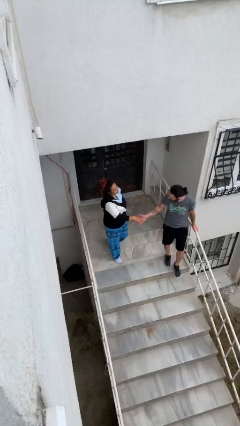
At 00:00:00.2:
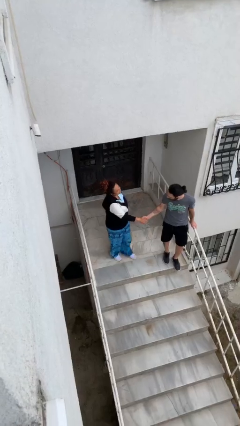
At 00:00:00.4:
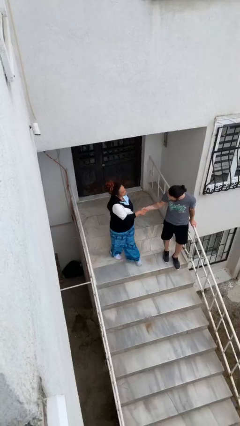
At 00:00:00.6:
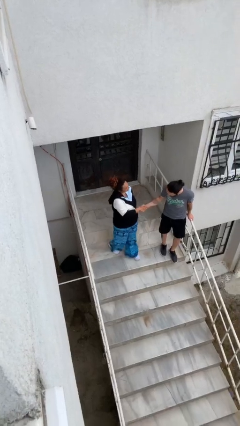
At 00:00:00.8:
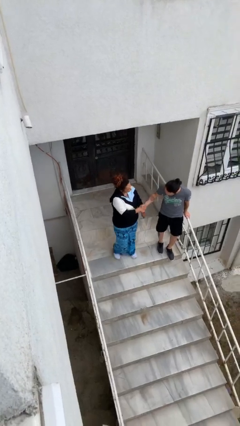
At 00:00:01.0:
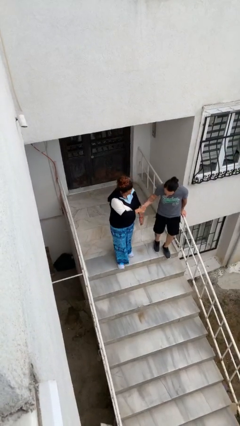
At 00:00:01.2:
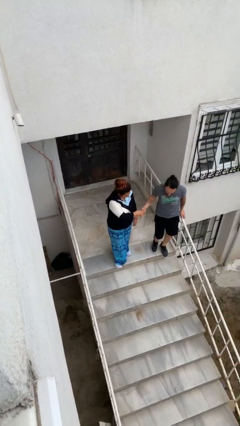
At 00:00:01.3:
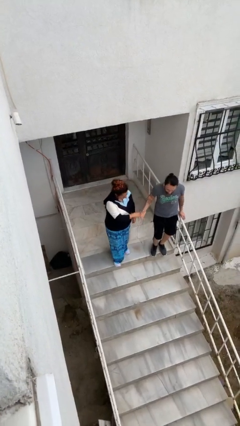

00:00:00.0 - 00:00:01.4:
person shakes hand

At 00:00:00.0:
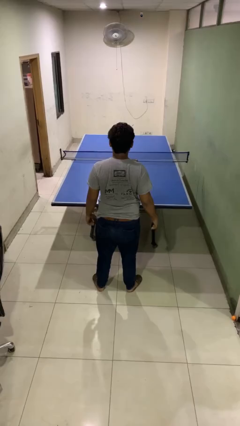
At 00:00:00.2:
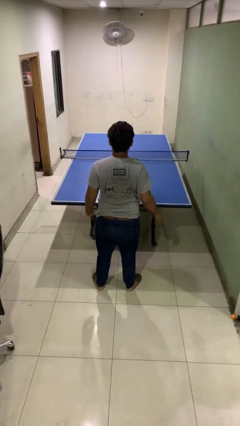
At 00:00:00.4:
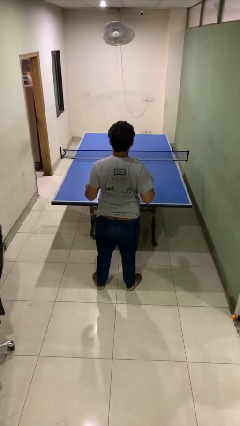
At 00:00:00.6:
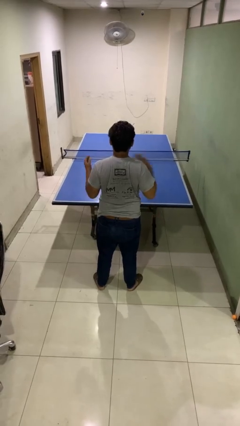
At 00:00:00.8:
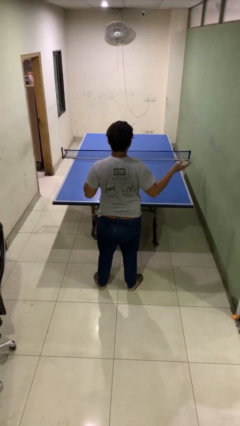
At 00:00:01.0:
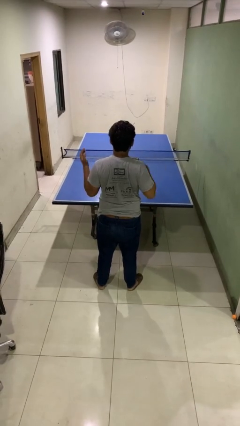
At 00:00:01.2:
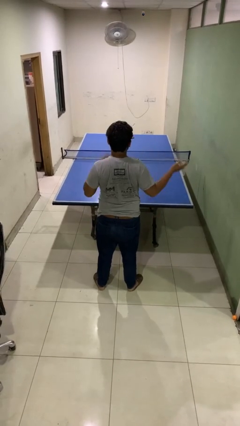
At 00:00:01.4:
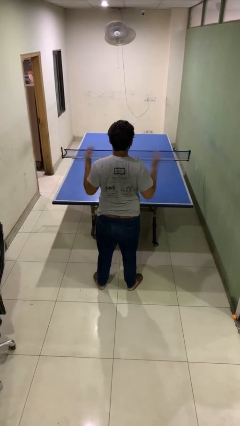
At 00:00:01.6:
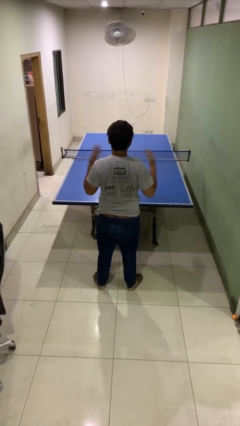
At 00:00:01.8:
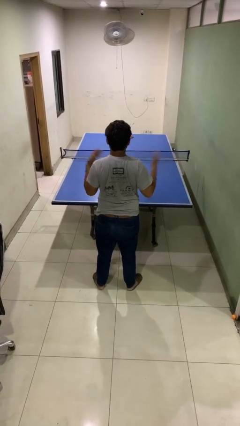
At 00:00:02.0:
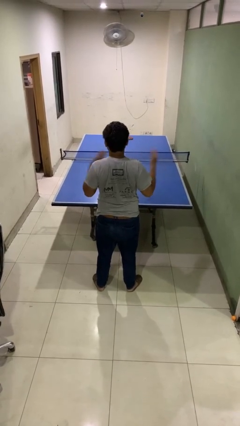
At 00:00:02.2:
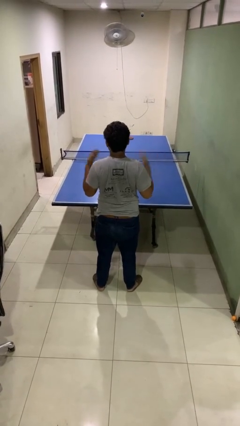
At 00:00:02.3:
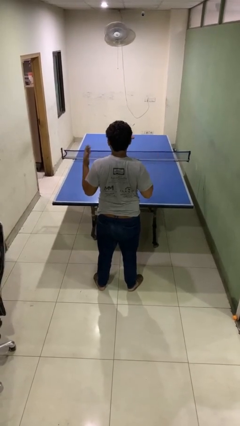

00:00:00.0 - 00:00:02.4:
person drums on chest

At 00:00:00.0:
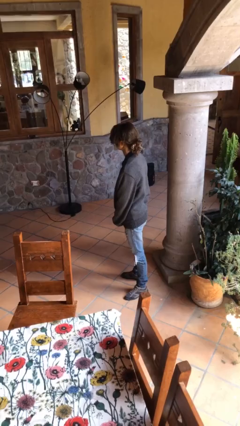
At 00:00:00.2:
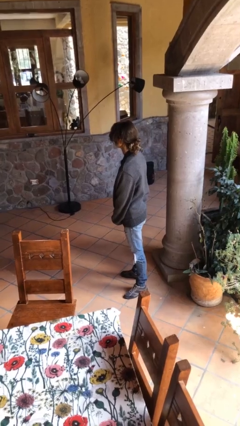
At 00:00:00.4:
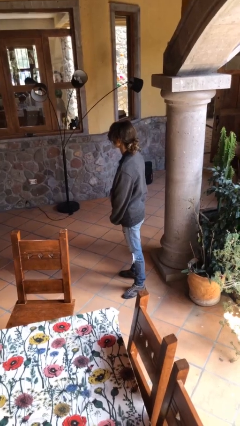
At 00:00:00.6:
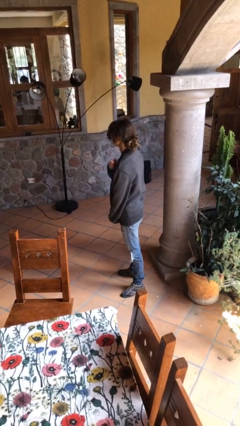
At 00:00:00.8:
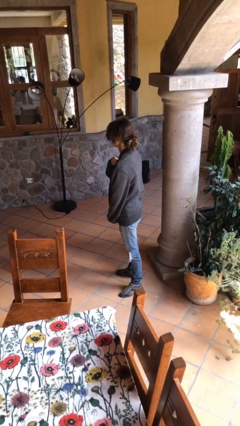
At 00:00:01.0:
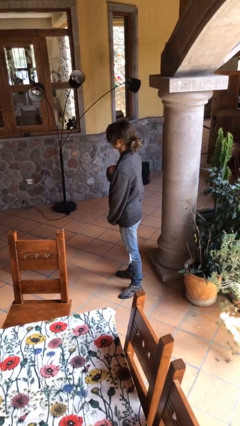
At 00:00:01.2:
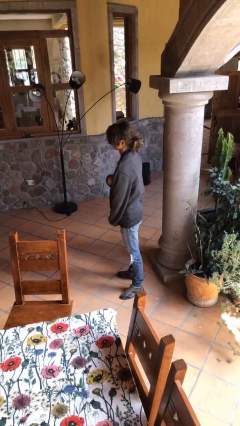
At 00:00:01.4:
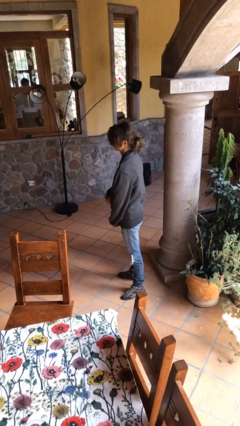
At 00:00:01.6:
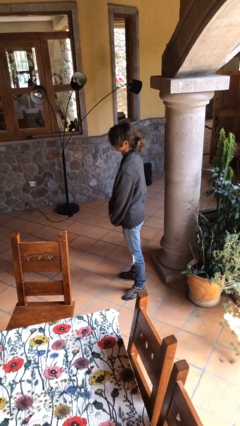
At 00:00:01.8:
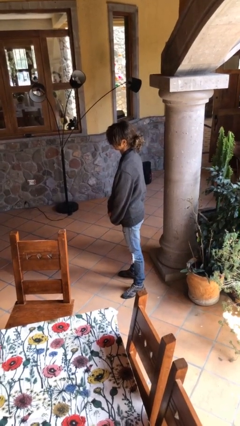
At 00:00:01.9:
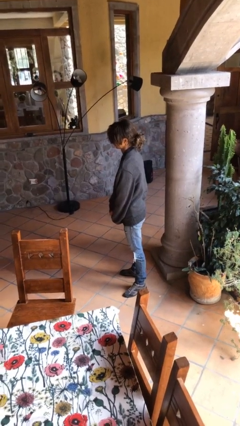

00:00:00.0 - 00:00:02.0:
person unzips jacket

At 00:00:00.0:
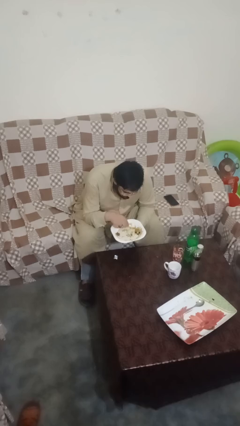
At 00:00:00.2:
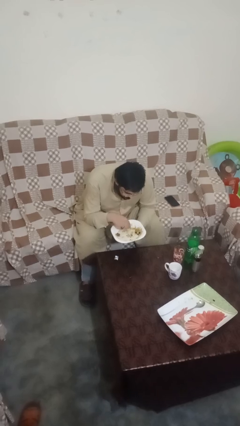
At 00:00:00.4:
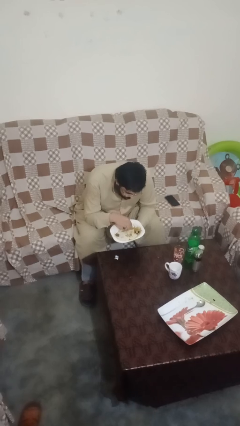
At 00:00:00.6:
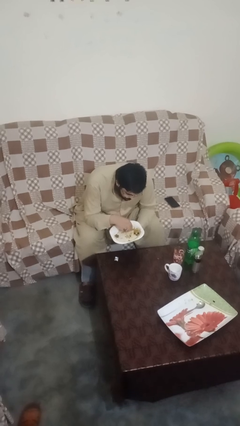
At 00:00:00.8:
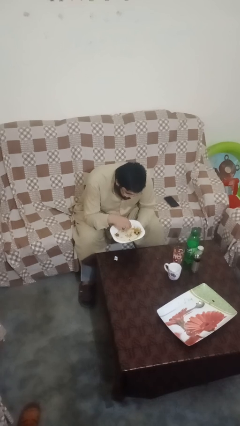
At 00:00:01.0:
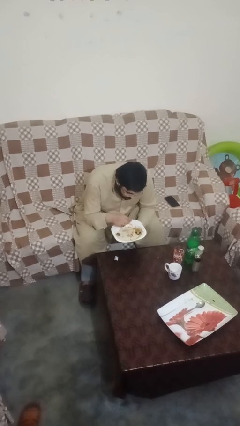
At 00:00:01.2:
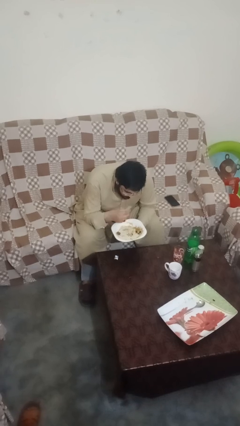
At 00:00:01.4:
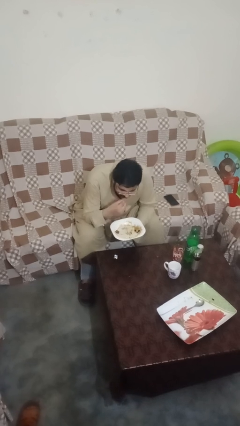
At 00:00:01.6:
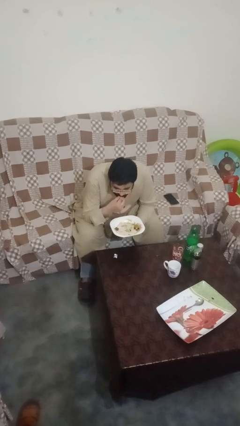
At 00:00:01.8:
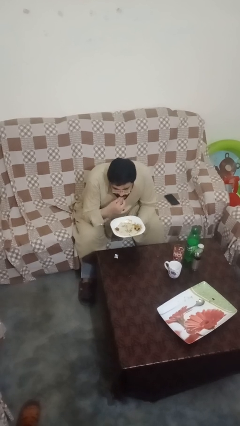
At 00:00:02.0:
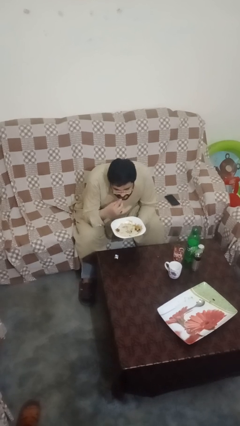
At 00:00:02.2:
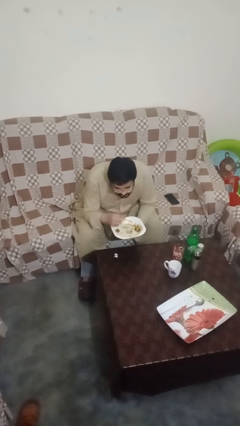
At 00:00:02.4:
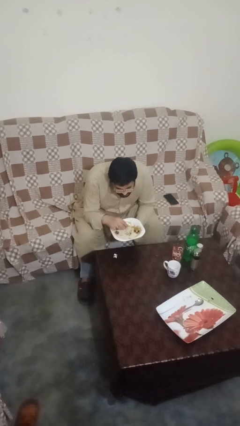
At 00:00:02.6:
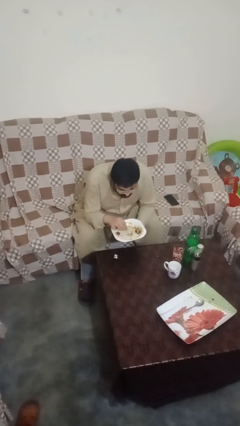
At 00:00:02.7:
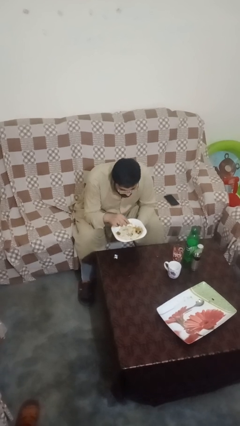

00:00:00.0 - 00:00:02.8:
person eats with hands

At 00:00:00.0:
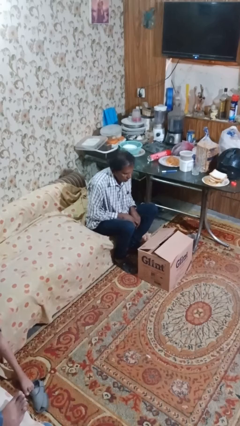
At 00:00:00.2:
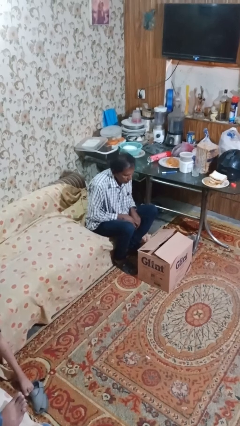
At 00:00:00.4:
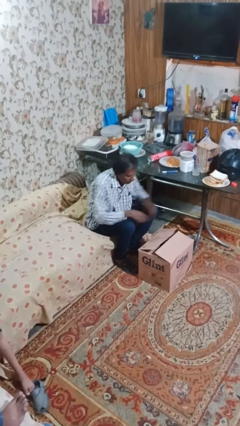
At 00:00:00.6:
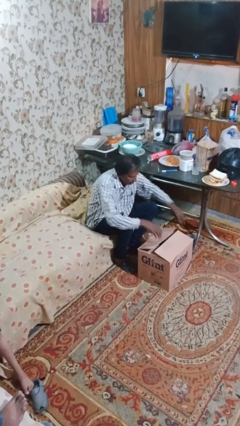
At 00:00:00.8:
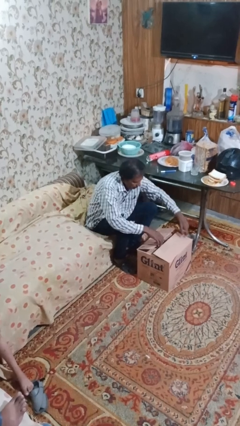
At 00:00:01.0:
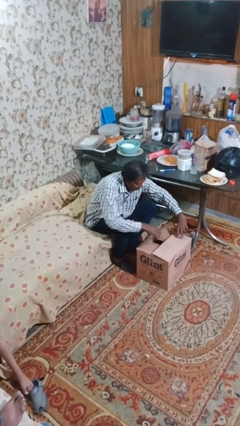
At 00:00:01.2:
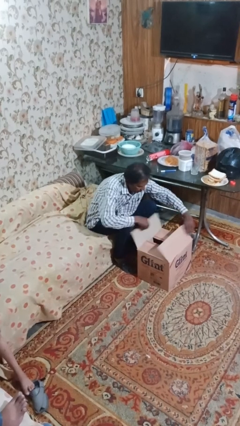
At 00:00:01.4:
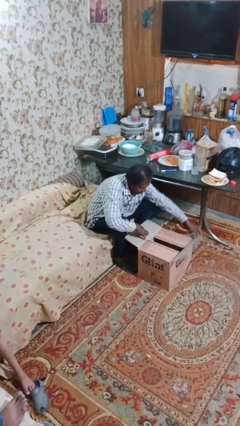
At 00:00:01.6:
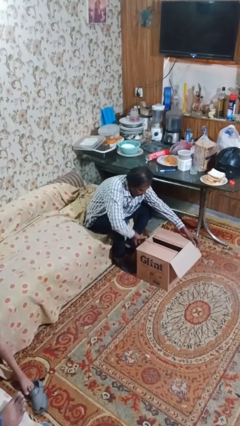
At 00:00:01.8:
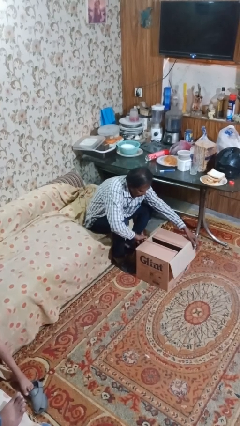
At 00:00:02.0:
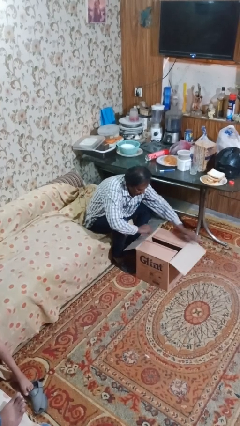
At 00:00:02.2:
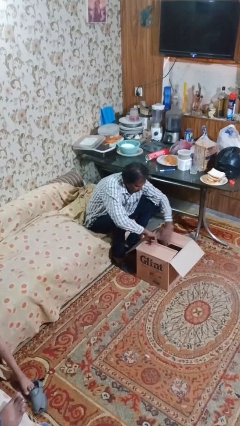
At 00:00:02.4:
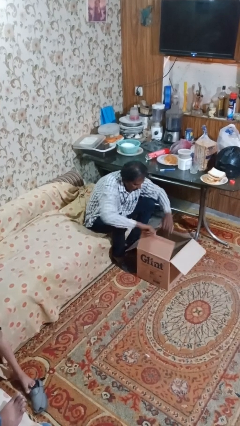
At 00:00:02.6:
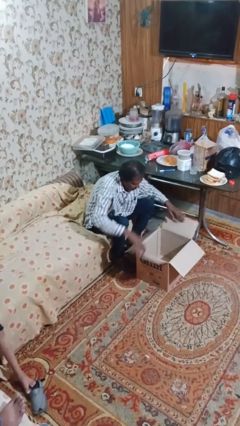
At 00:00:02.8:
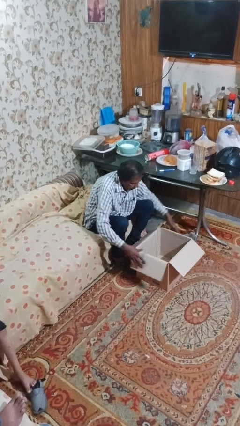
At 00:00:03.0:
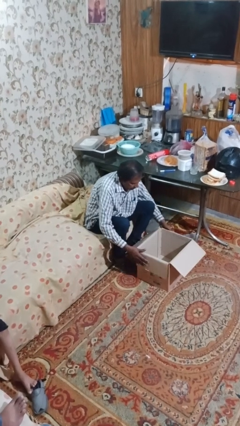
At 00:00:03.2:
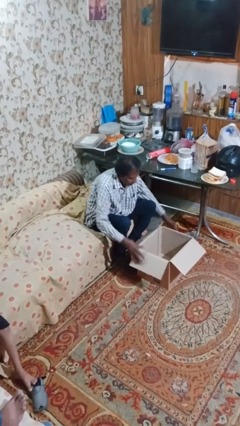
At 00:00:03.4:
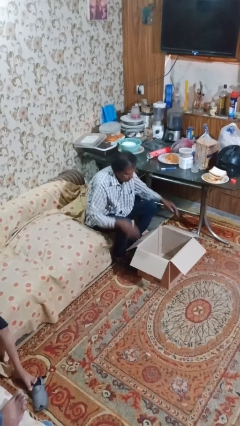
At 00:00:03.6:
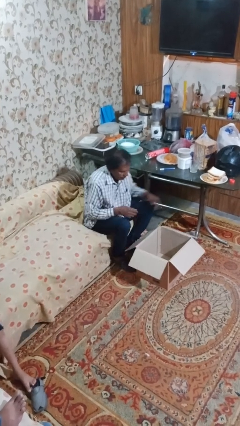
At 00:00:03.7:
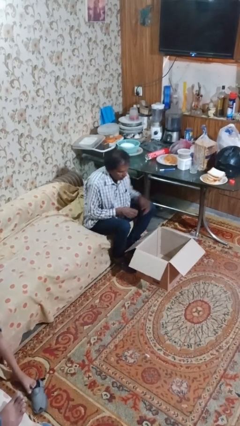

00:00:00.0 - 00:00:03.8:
person opens box

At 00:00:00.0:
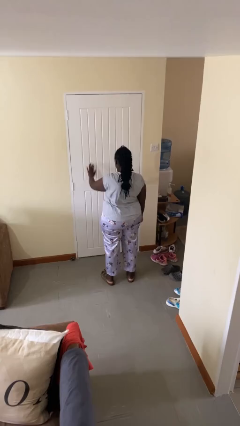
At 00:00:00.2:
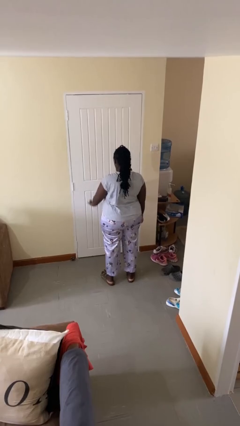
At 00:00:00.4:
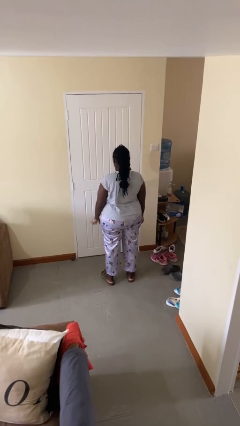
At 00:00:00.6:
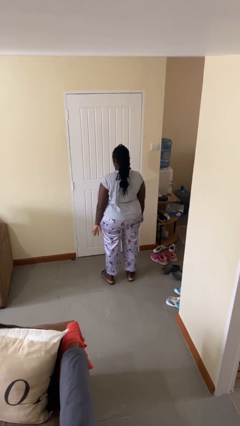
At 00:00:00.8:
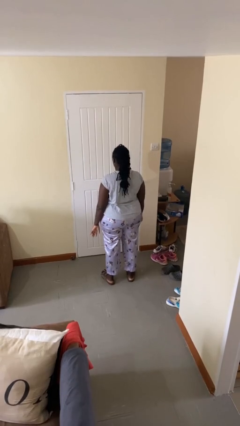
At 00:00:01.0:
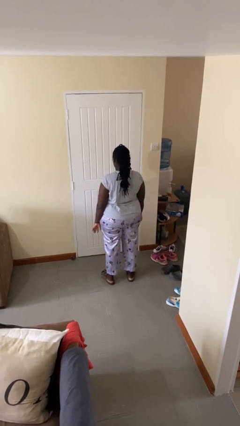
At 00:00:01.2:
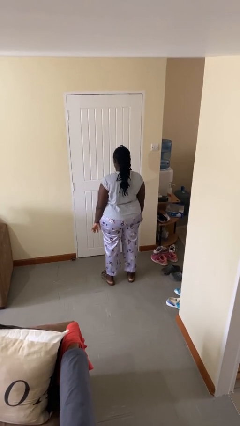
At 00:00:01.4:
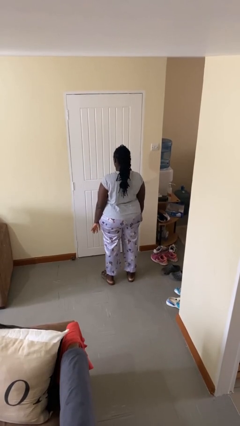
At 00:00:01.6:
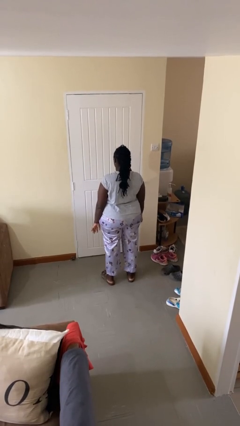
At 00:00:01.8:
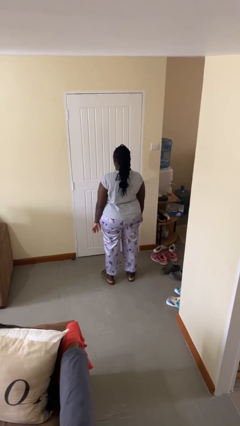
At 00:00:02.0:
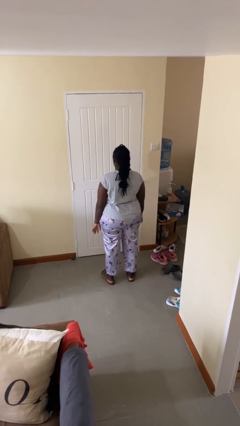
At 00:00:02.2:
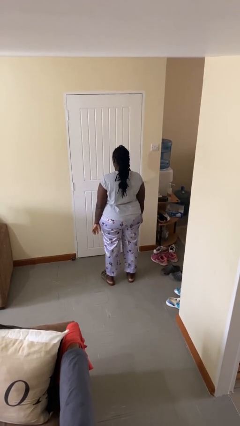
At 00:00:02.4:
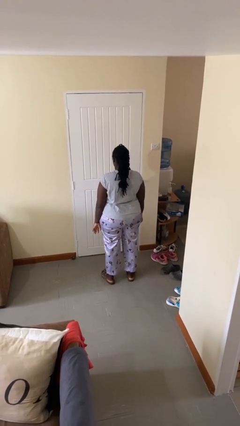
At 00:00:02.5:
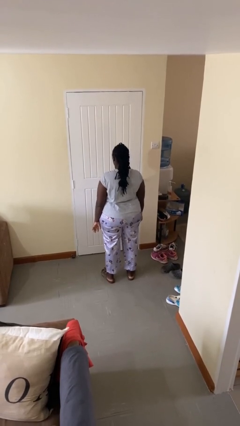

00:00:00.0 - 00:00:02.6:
person gestures swipe down

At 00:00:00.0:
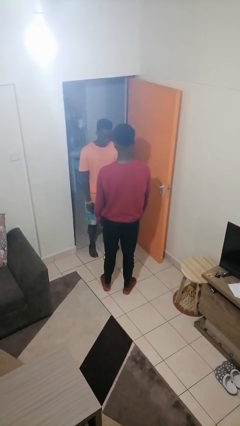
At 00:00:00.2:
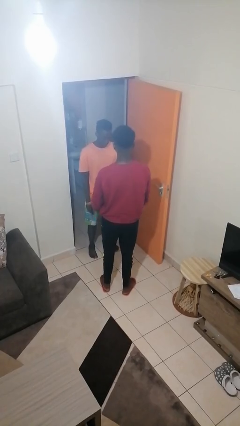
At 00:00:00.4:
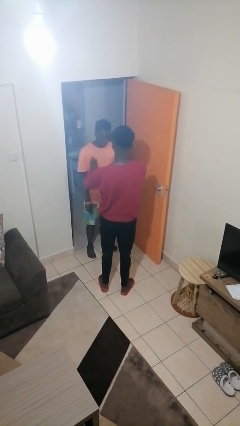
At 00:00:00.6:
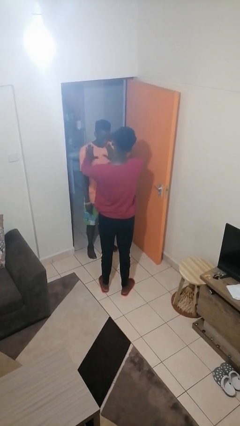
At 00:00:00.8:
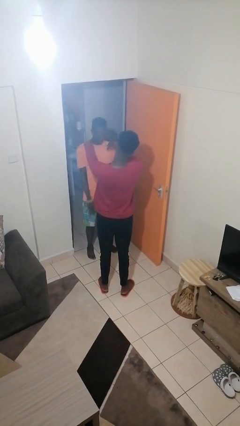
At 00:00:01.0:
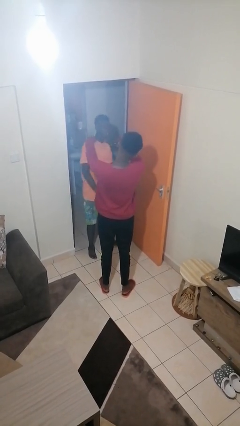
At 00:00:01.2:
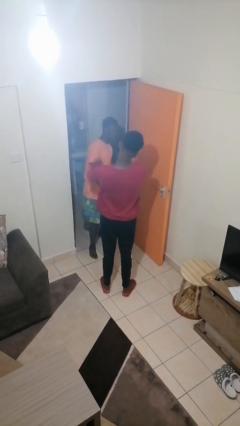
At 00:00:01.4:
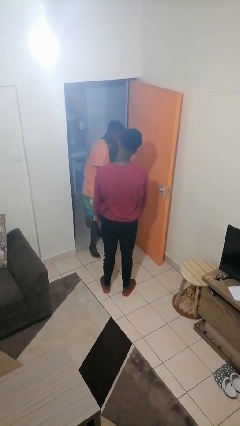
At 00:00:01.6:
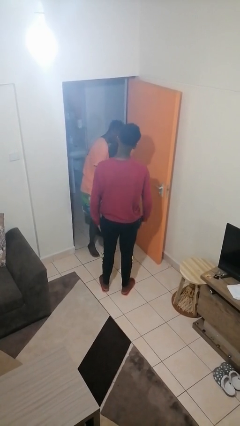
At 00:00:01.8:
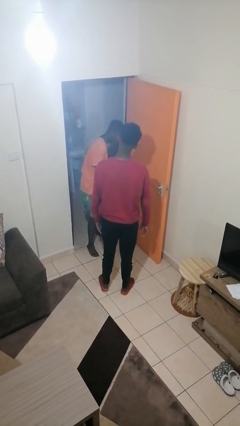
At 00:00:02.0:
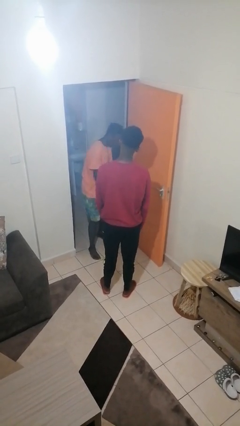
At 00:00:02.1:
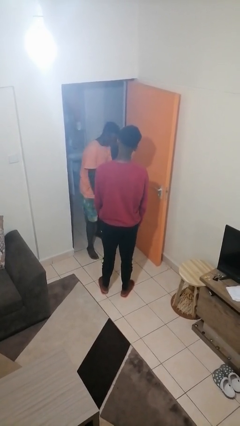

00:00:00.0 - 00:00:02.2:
person shoves person
